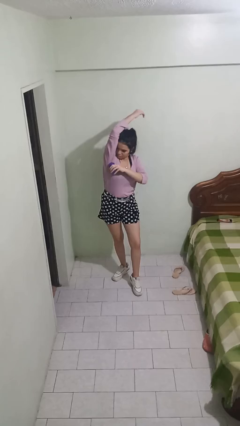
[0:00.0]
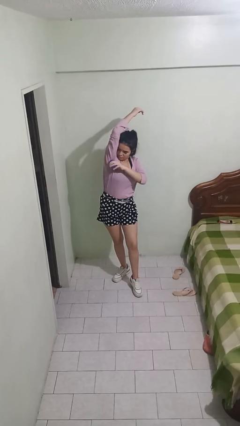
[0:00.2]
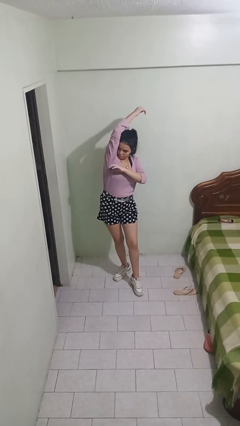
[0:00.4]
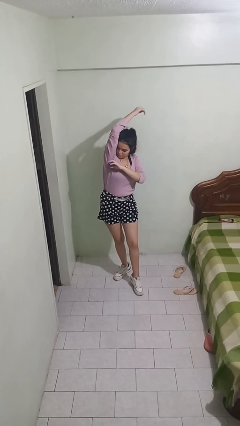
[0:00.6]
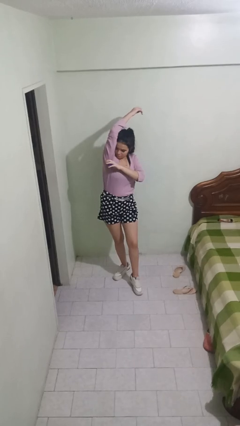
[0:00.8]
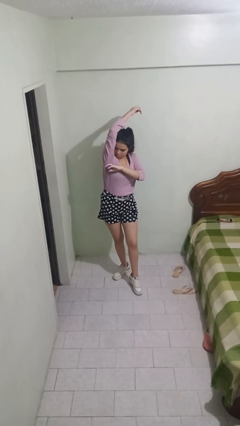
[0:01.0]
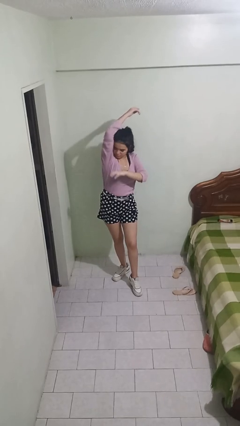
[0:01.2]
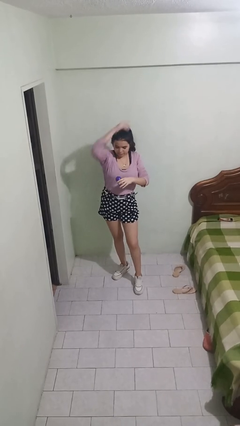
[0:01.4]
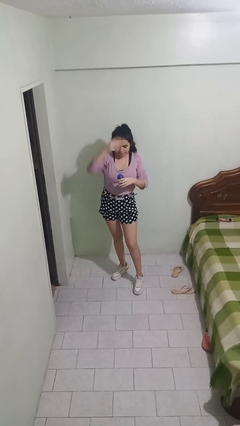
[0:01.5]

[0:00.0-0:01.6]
person applies deodorant

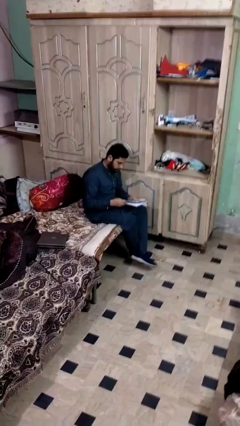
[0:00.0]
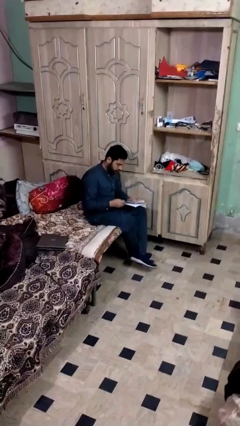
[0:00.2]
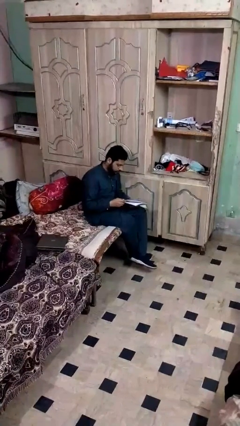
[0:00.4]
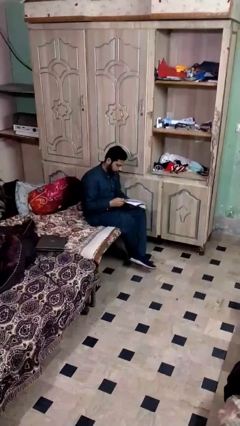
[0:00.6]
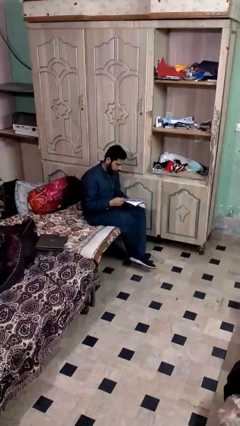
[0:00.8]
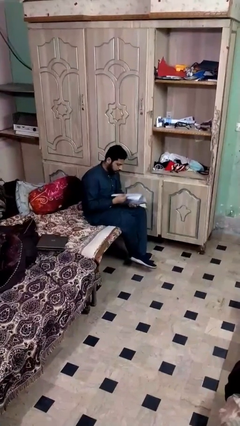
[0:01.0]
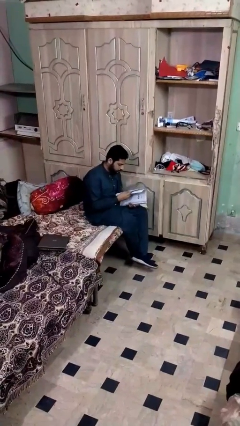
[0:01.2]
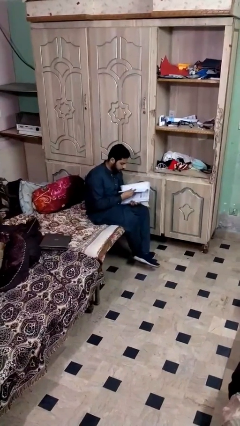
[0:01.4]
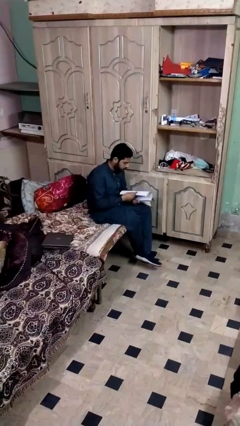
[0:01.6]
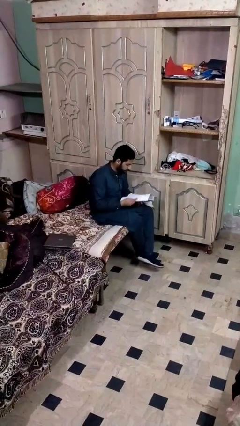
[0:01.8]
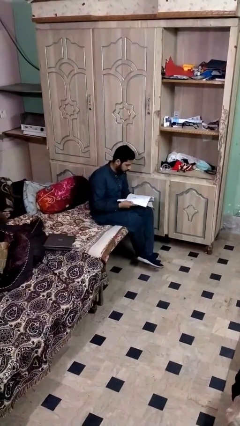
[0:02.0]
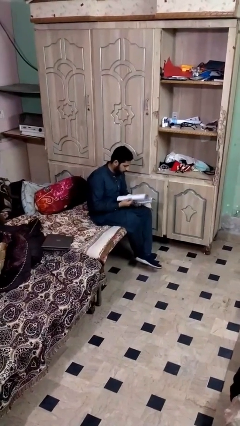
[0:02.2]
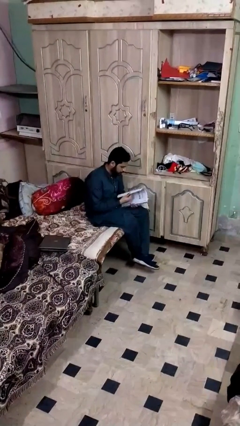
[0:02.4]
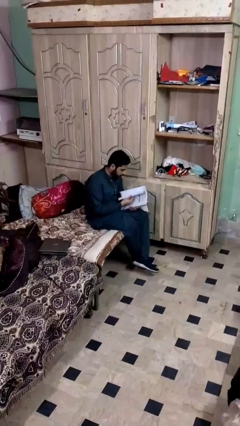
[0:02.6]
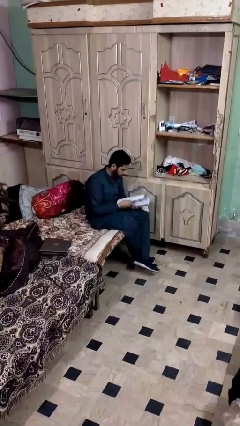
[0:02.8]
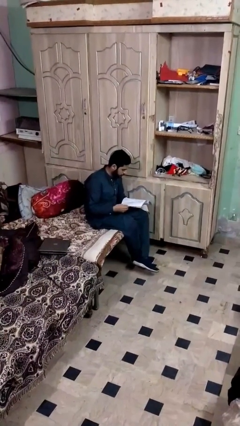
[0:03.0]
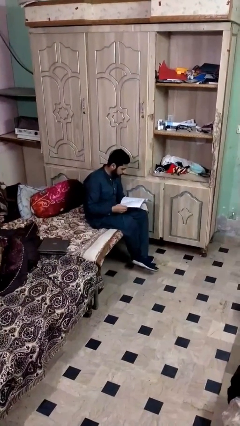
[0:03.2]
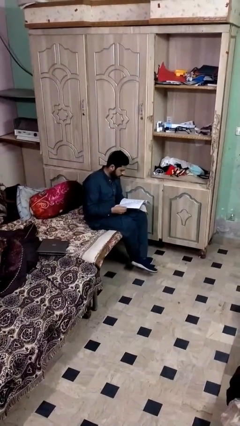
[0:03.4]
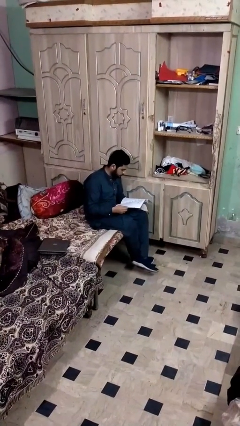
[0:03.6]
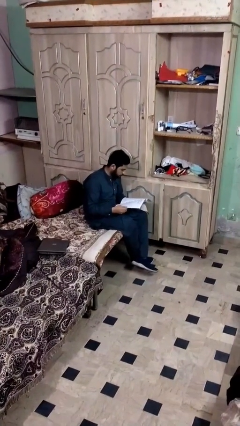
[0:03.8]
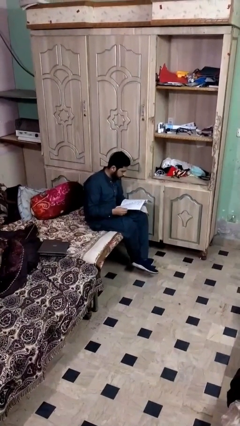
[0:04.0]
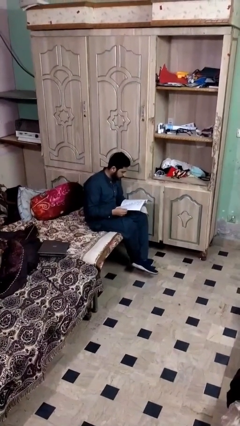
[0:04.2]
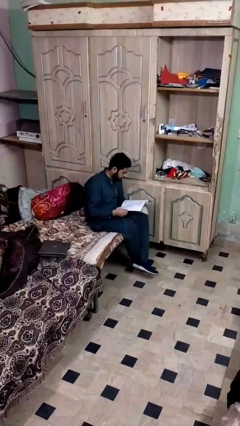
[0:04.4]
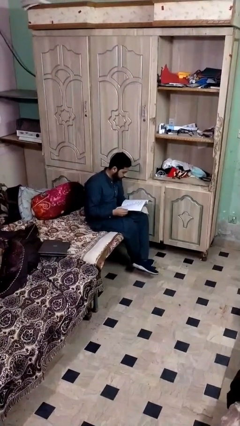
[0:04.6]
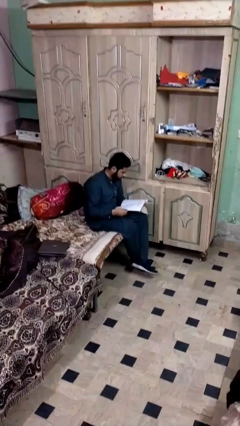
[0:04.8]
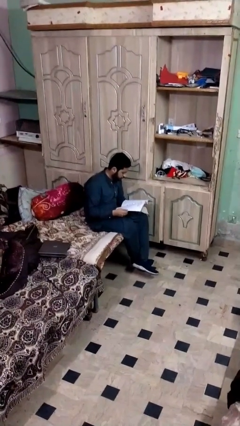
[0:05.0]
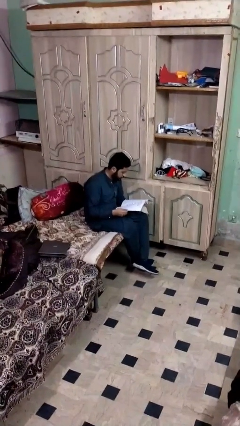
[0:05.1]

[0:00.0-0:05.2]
person reads document

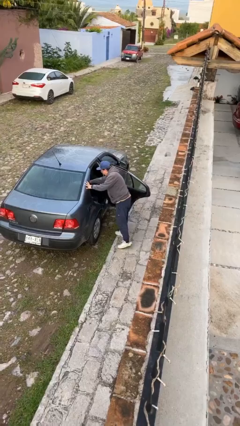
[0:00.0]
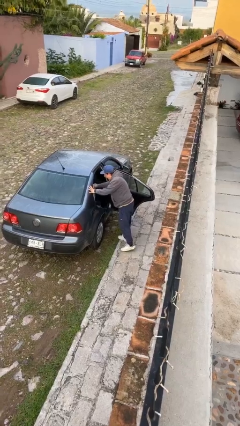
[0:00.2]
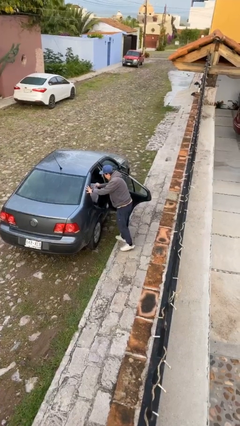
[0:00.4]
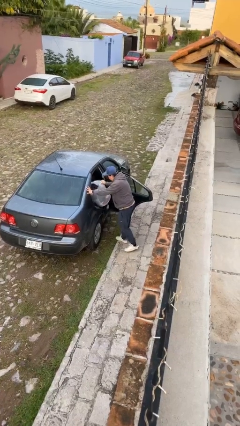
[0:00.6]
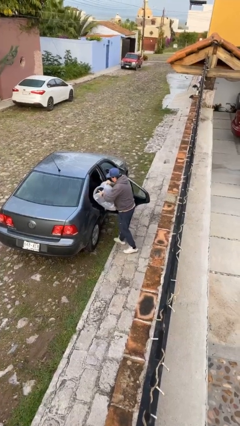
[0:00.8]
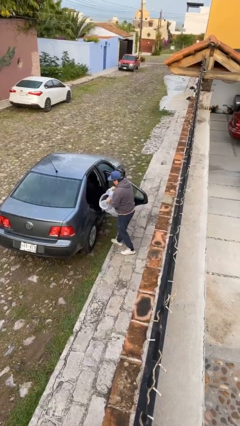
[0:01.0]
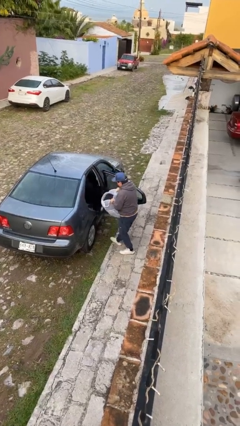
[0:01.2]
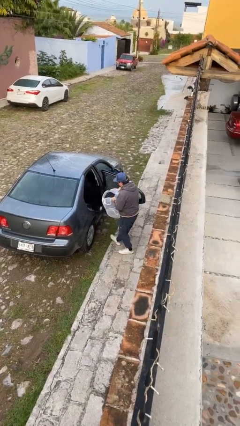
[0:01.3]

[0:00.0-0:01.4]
person unloads car

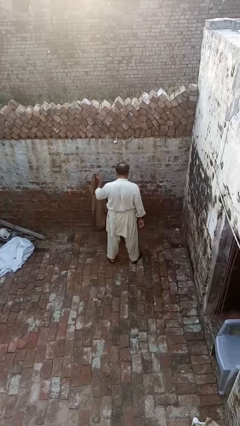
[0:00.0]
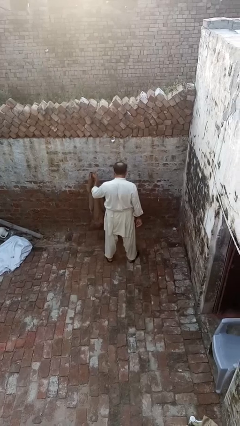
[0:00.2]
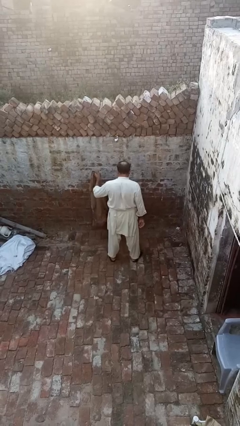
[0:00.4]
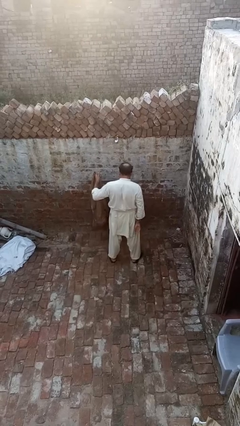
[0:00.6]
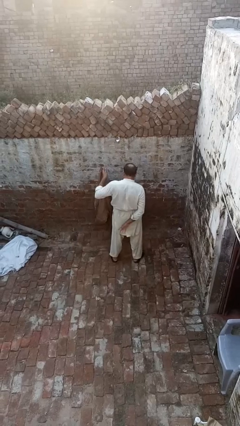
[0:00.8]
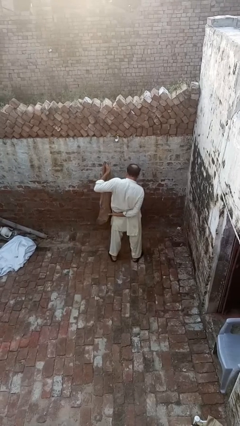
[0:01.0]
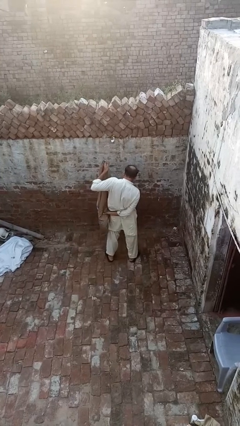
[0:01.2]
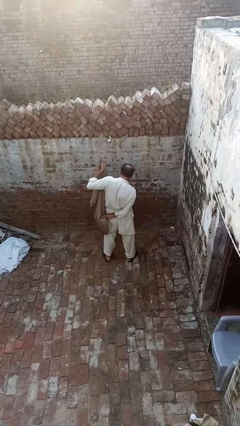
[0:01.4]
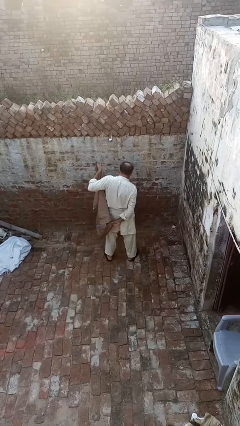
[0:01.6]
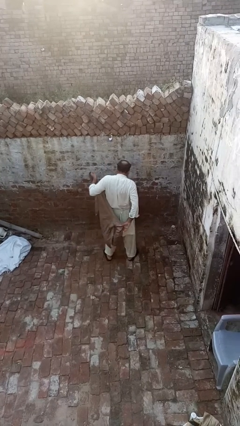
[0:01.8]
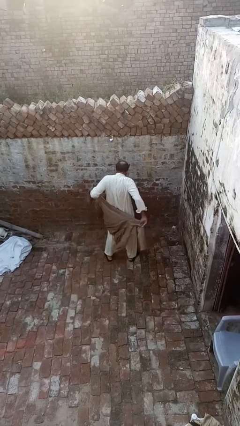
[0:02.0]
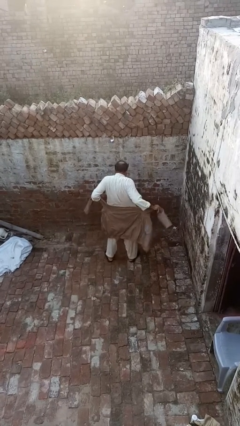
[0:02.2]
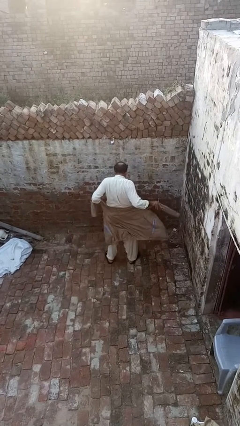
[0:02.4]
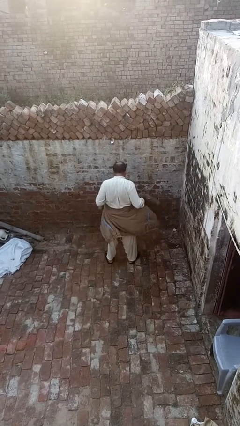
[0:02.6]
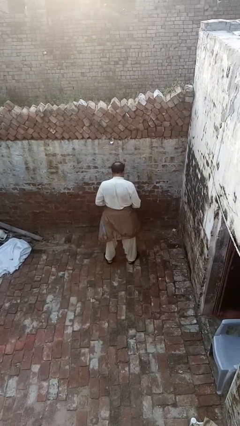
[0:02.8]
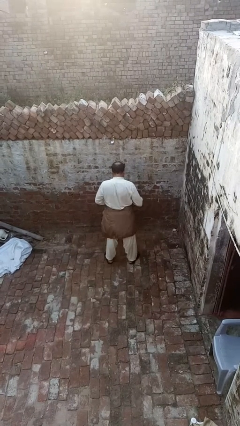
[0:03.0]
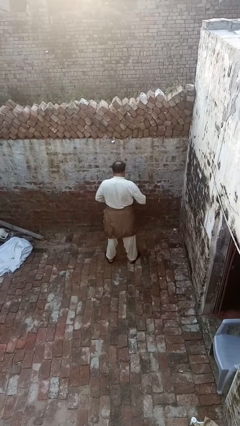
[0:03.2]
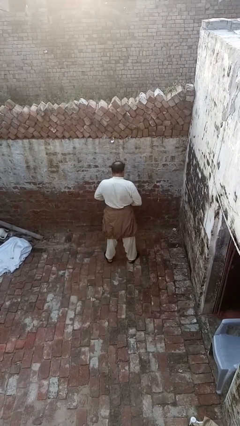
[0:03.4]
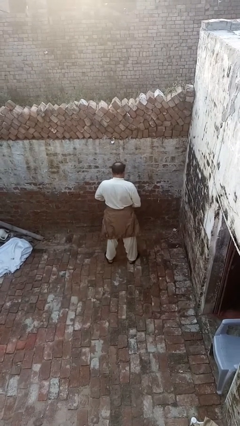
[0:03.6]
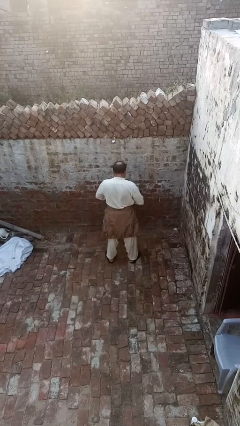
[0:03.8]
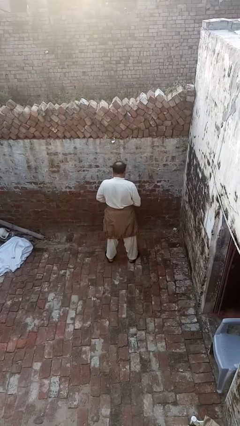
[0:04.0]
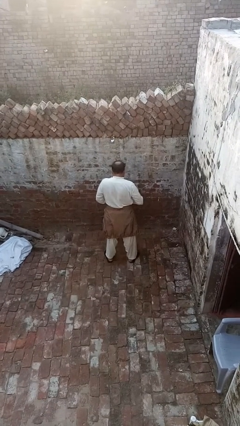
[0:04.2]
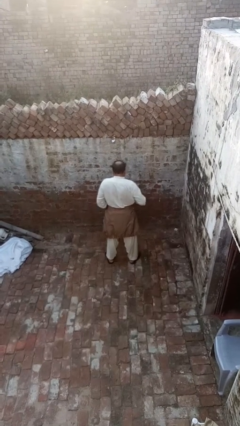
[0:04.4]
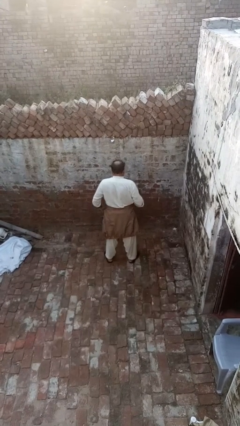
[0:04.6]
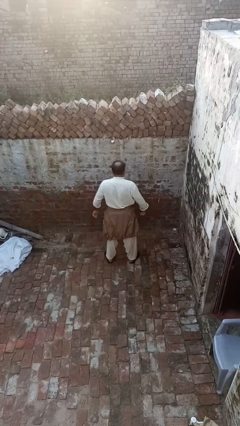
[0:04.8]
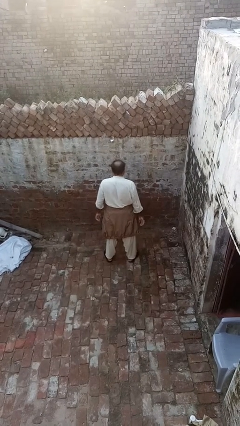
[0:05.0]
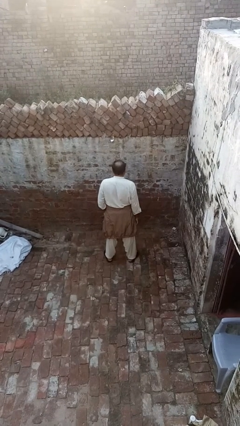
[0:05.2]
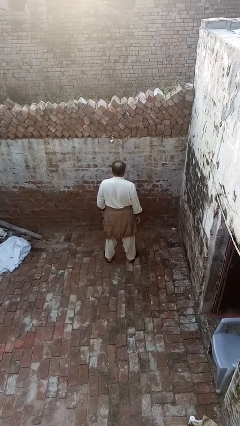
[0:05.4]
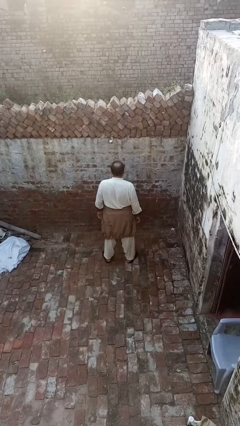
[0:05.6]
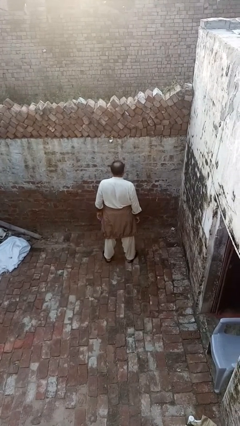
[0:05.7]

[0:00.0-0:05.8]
person ties jacket around waist

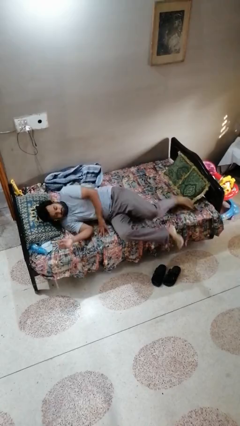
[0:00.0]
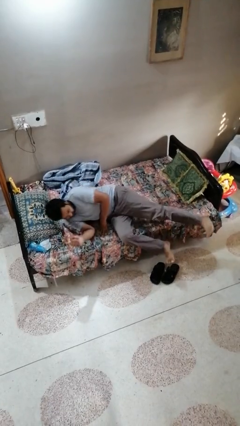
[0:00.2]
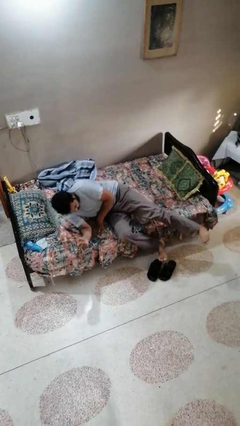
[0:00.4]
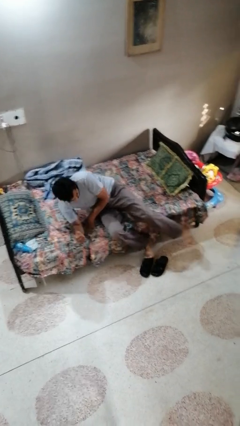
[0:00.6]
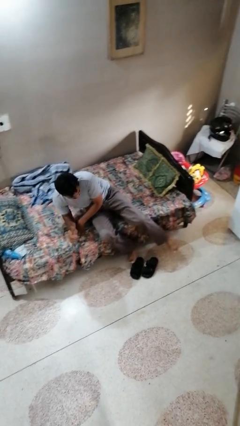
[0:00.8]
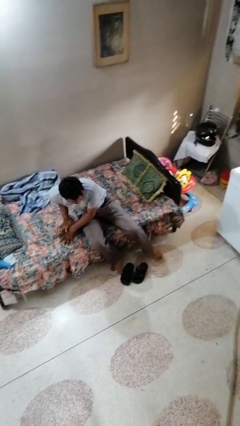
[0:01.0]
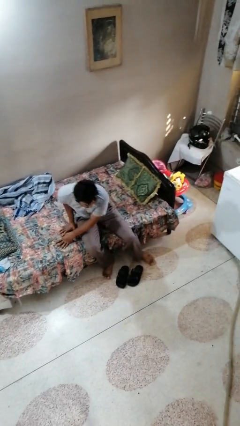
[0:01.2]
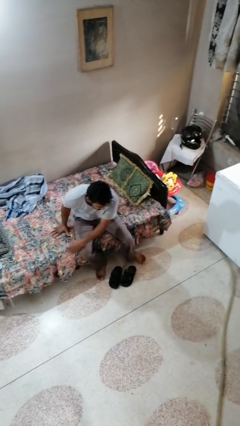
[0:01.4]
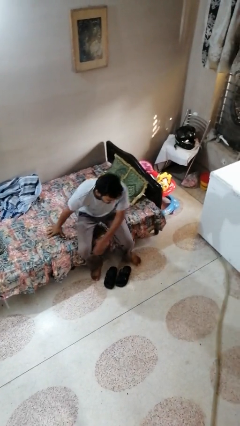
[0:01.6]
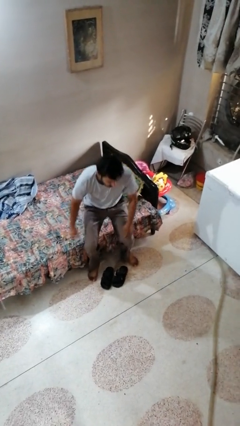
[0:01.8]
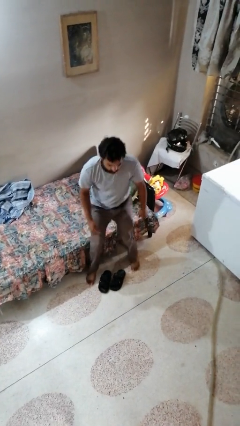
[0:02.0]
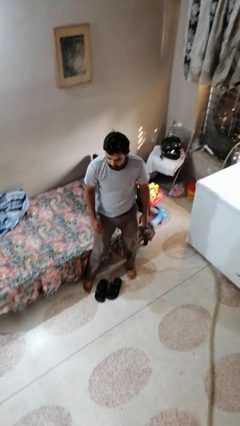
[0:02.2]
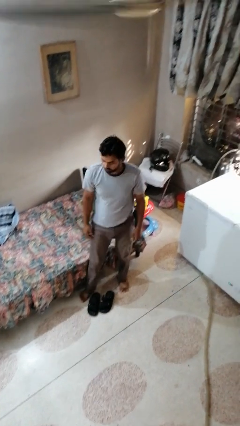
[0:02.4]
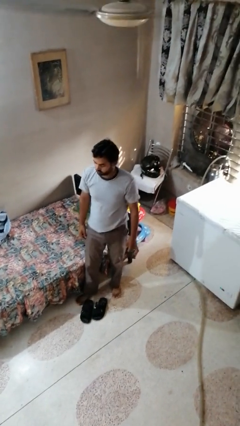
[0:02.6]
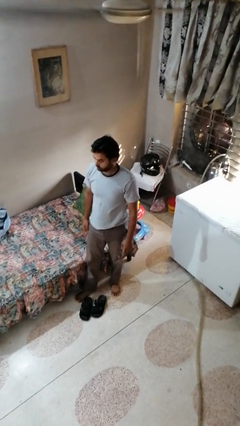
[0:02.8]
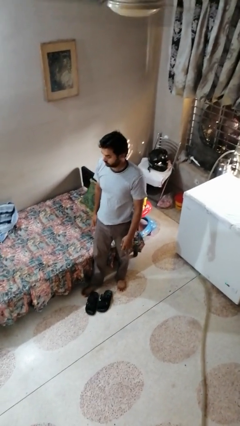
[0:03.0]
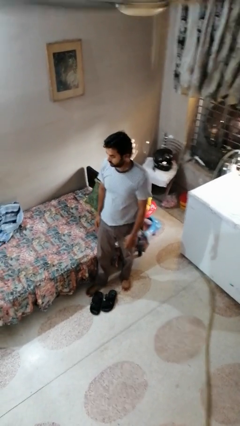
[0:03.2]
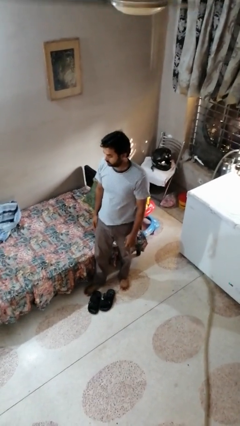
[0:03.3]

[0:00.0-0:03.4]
person stands up

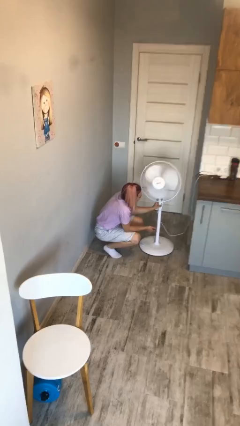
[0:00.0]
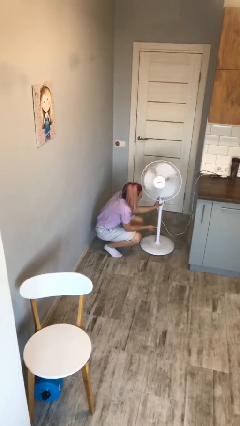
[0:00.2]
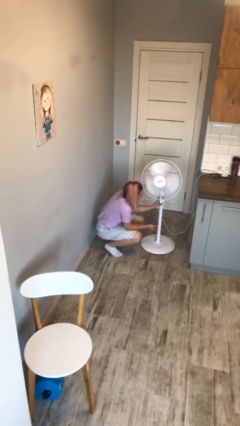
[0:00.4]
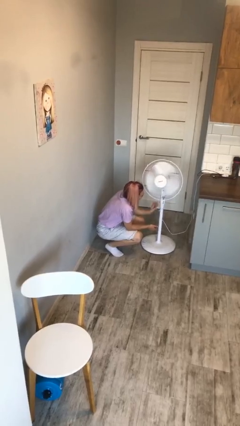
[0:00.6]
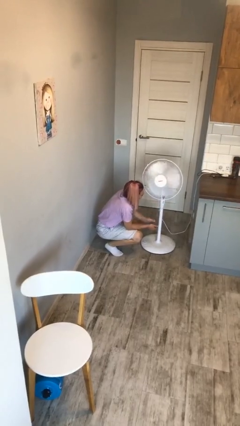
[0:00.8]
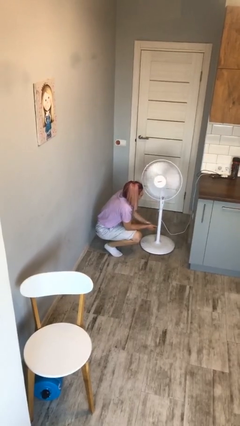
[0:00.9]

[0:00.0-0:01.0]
person turns on fan
